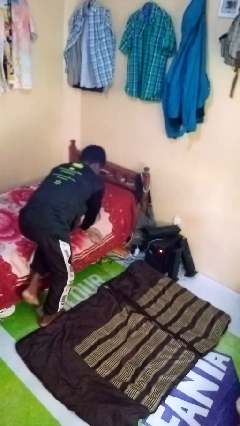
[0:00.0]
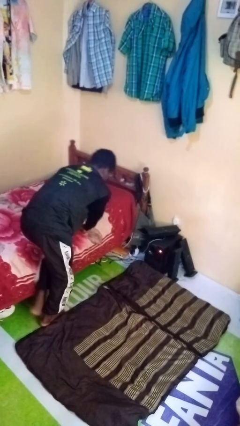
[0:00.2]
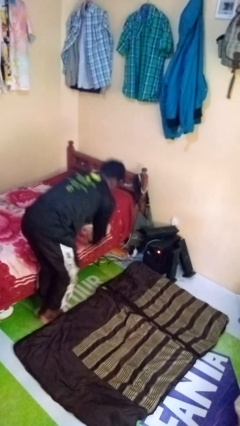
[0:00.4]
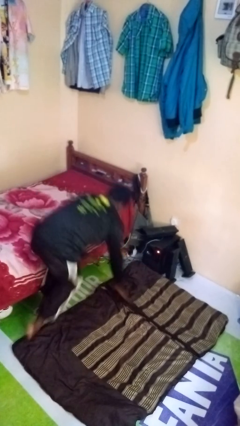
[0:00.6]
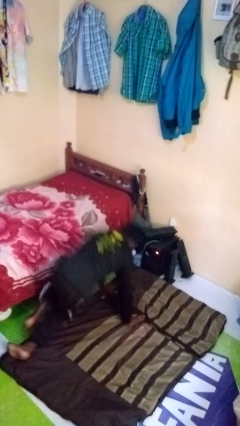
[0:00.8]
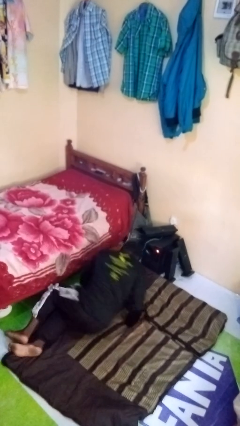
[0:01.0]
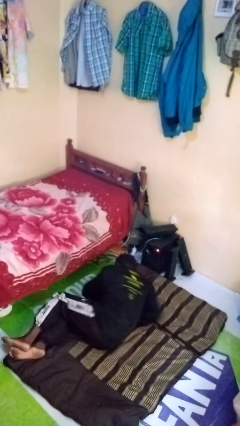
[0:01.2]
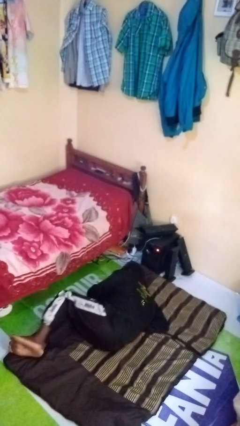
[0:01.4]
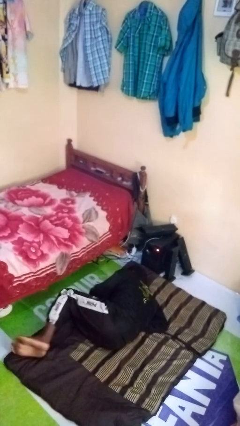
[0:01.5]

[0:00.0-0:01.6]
person falls from bed

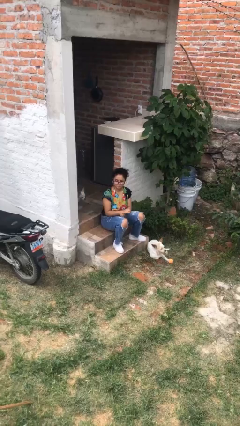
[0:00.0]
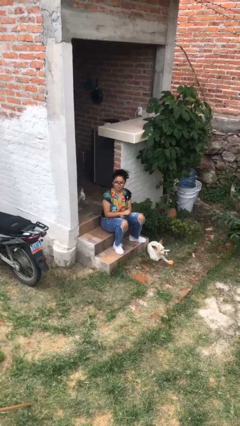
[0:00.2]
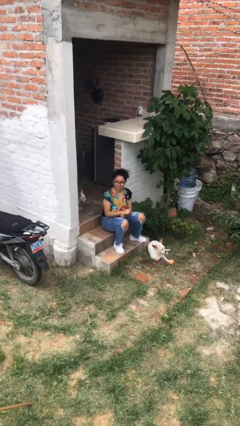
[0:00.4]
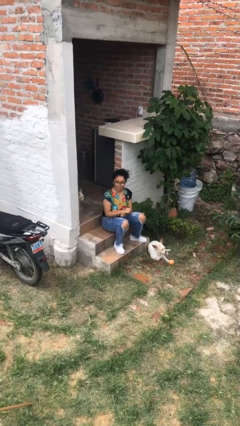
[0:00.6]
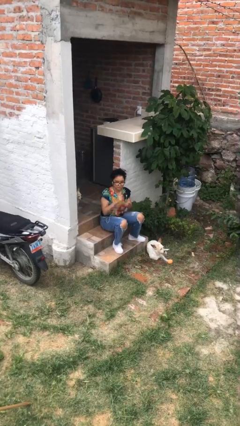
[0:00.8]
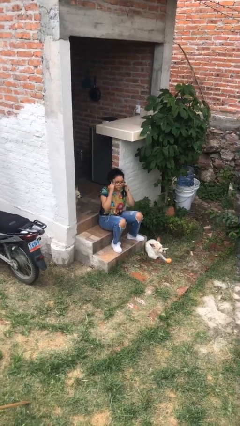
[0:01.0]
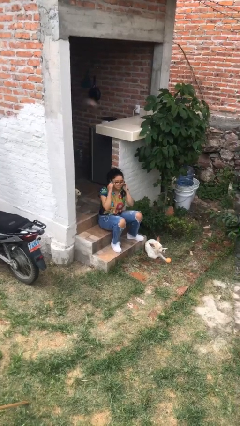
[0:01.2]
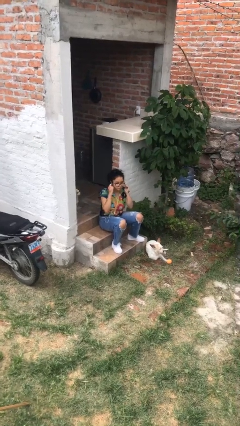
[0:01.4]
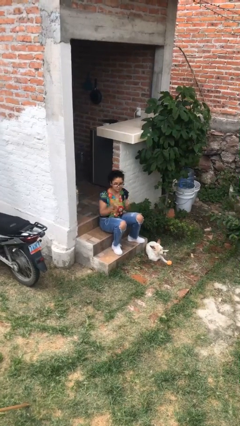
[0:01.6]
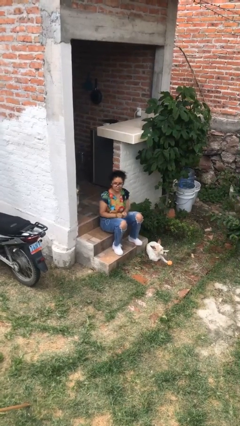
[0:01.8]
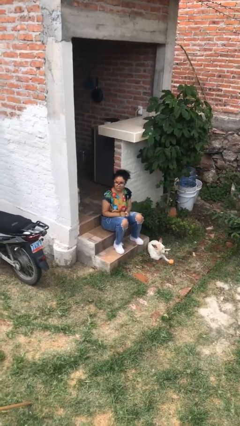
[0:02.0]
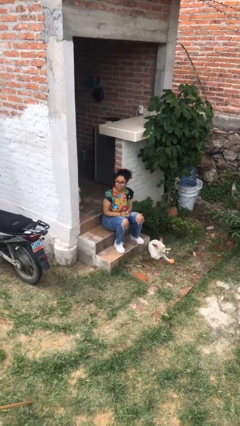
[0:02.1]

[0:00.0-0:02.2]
person takes off headphones

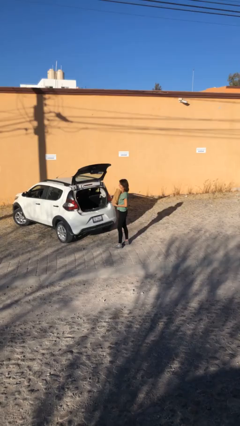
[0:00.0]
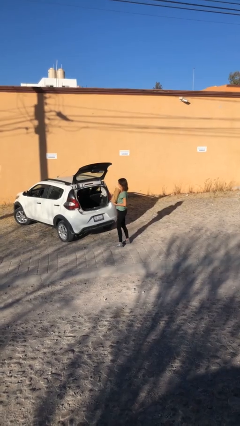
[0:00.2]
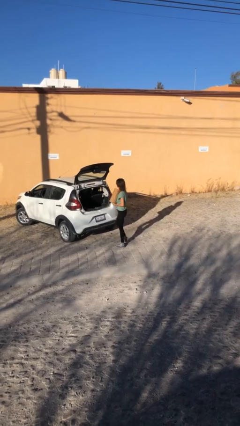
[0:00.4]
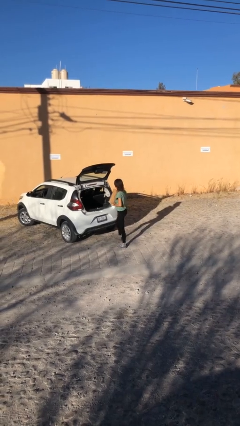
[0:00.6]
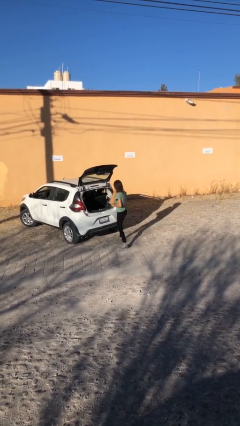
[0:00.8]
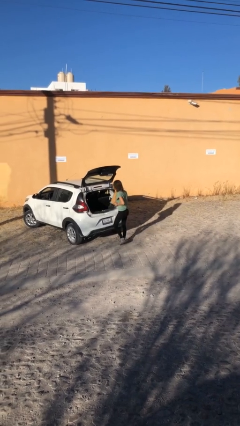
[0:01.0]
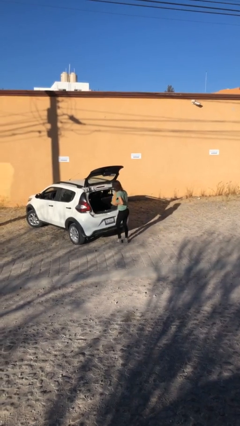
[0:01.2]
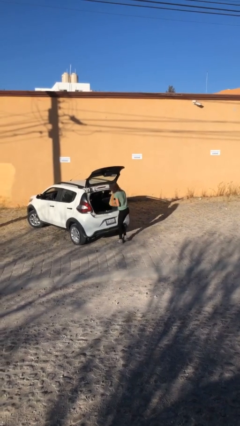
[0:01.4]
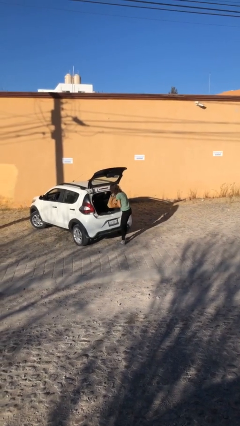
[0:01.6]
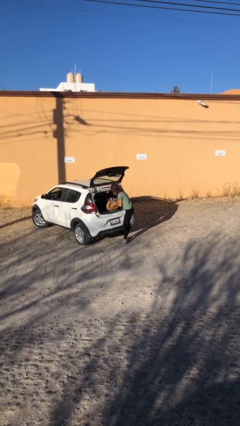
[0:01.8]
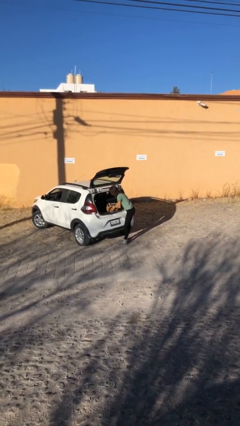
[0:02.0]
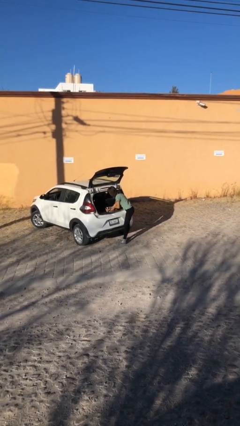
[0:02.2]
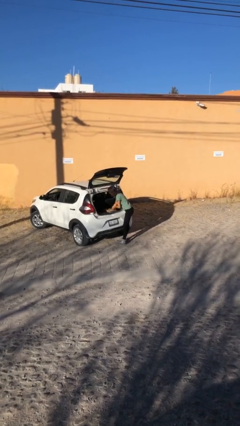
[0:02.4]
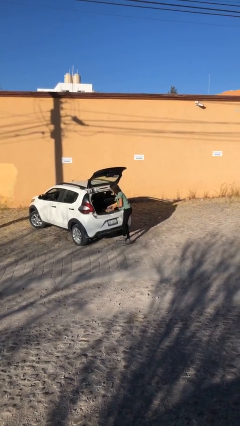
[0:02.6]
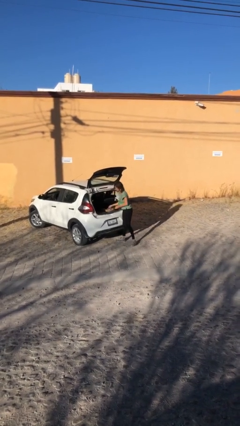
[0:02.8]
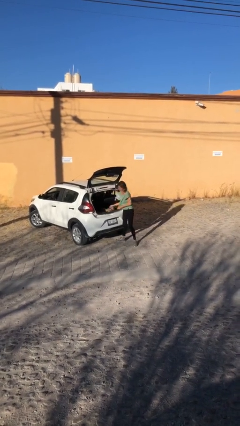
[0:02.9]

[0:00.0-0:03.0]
person loads car

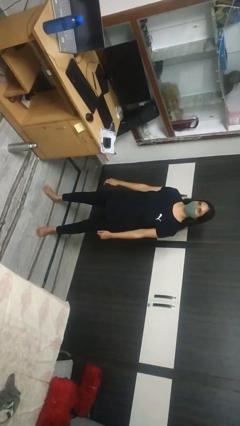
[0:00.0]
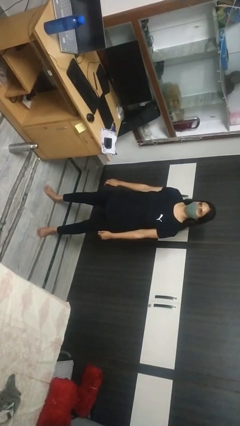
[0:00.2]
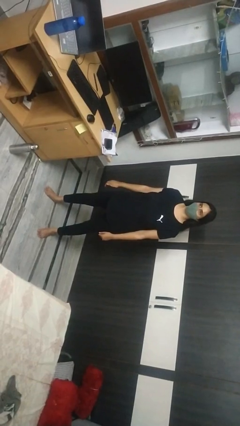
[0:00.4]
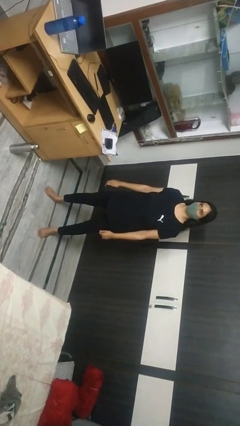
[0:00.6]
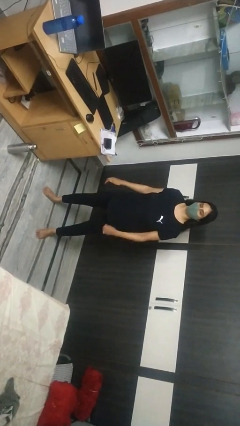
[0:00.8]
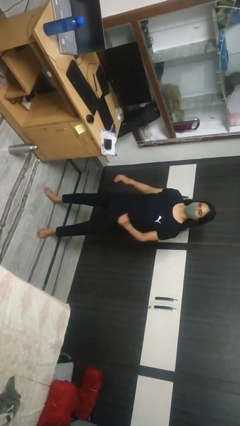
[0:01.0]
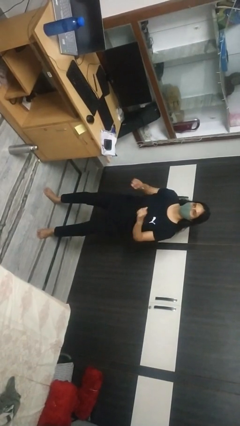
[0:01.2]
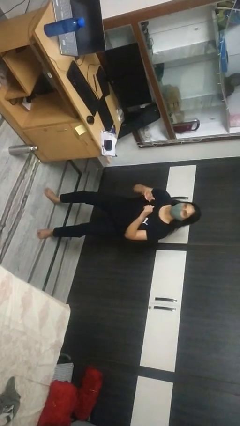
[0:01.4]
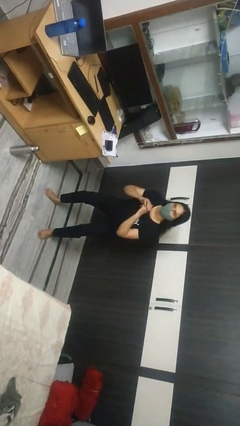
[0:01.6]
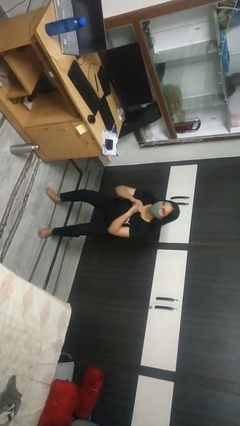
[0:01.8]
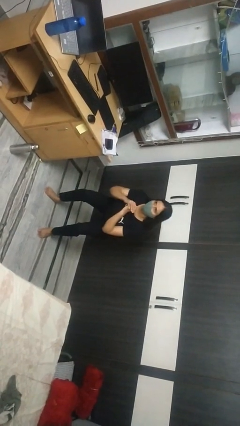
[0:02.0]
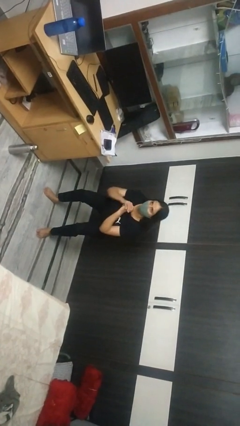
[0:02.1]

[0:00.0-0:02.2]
person squats

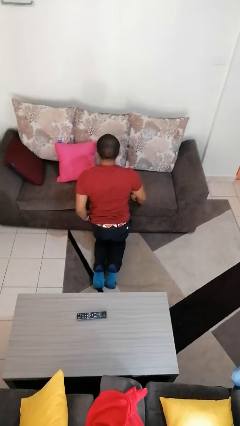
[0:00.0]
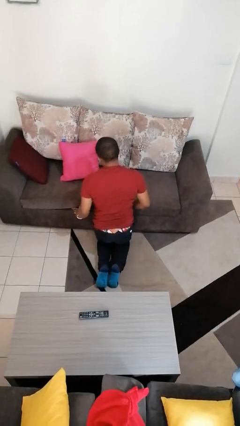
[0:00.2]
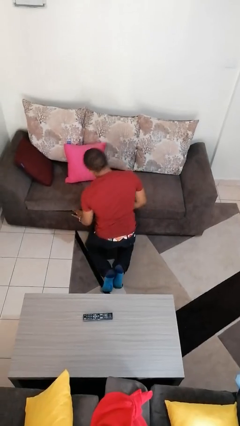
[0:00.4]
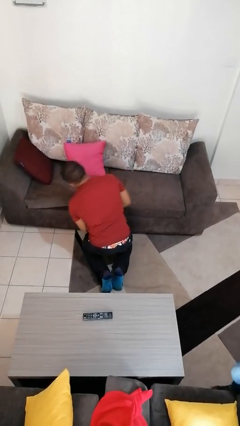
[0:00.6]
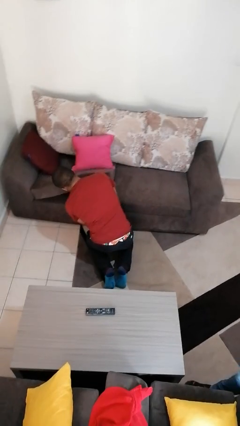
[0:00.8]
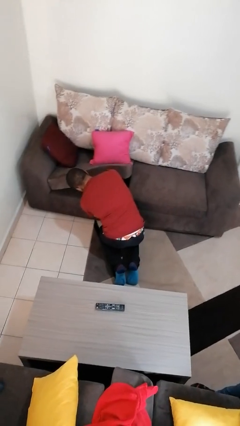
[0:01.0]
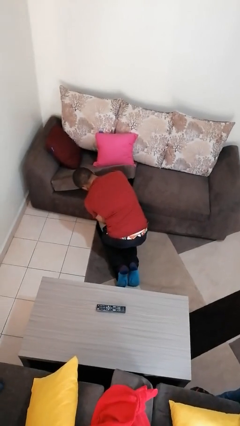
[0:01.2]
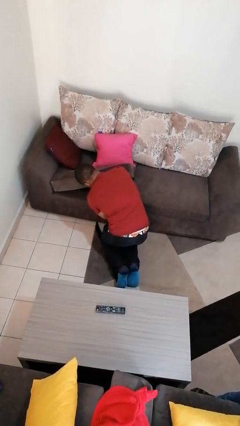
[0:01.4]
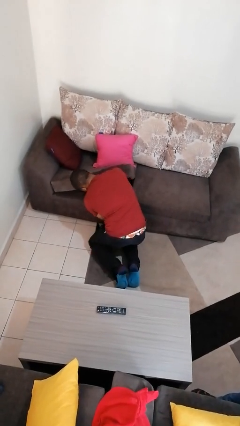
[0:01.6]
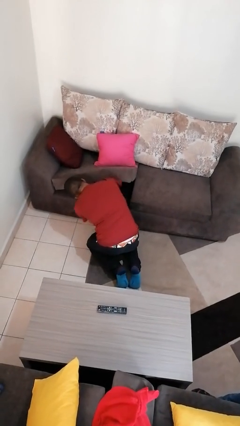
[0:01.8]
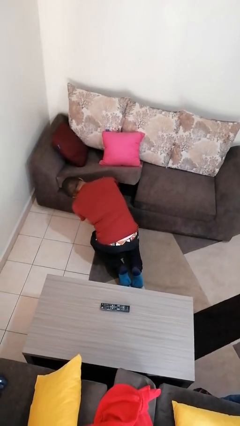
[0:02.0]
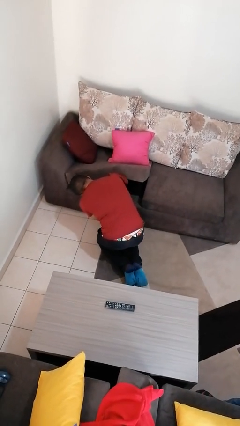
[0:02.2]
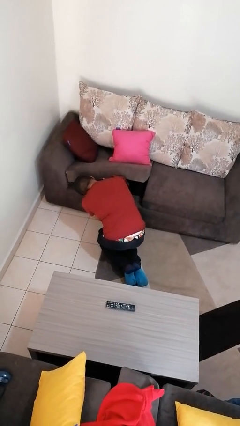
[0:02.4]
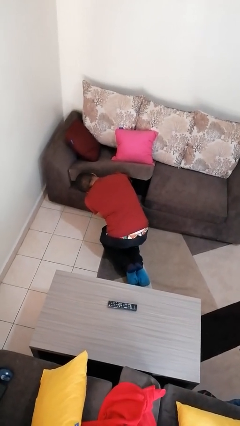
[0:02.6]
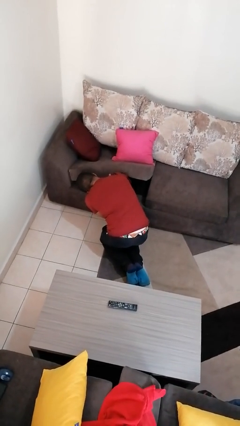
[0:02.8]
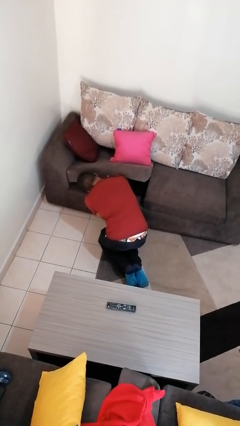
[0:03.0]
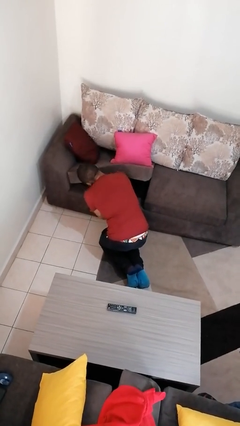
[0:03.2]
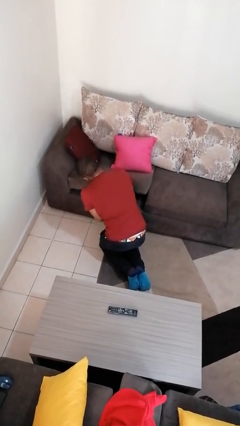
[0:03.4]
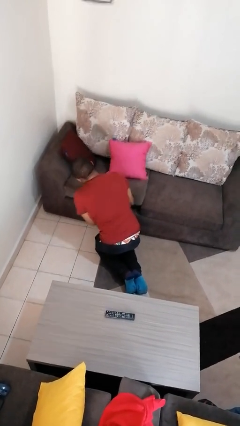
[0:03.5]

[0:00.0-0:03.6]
person searches under couch

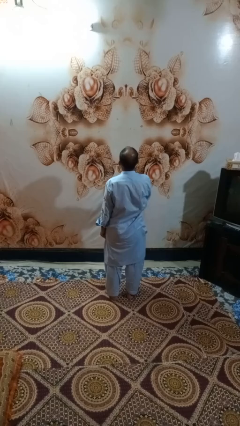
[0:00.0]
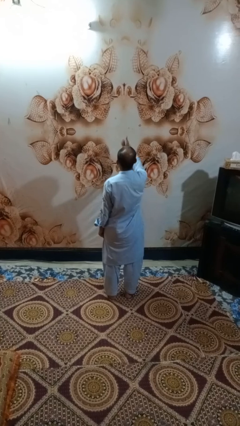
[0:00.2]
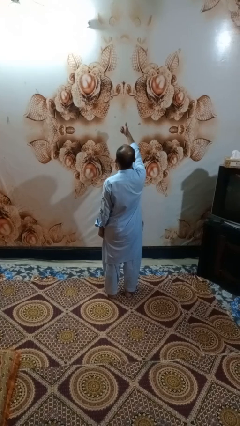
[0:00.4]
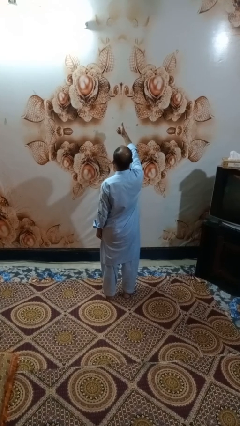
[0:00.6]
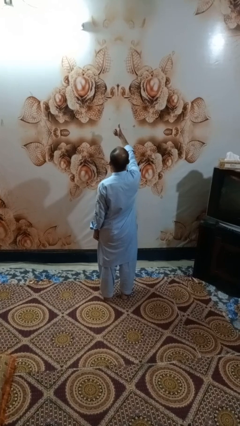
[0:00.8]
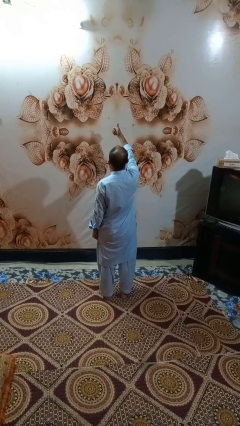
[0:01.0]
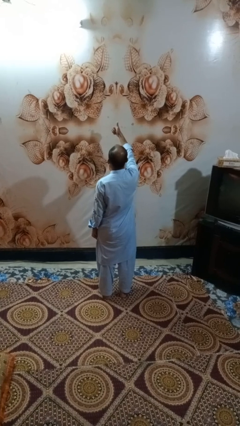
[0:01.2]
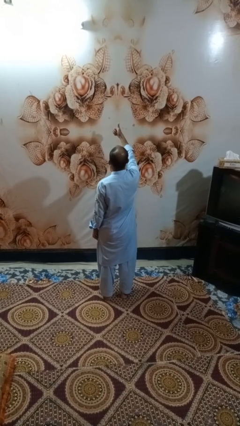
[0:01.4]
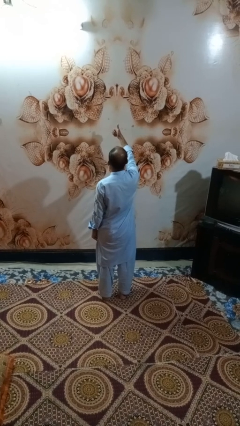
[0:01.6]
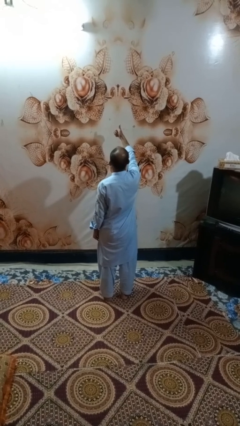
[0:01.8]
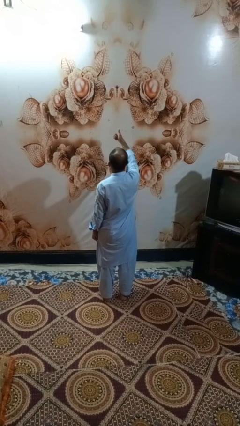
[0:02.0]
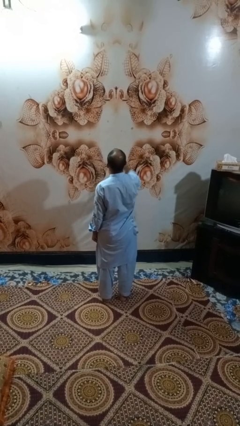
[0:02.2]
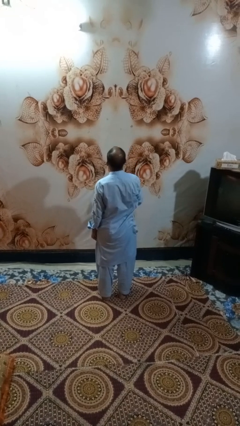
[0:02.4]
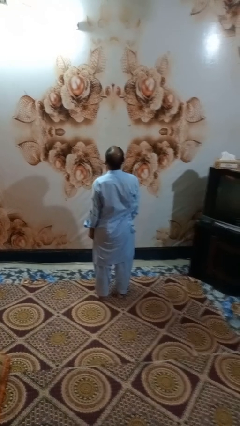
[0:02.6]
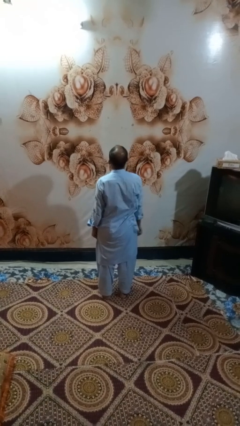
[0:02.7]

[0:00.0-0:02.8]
person gestures thumbs up

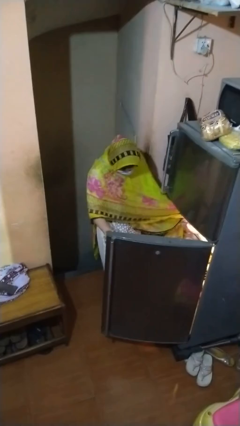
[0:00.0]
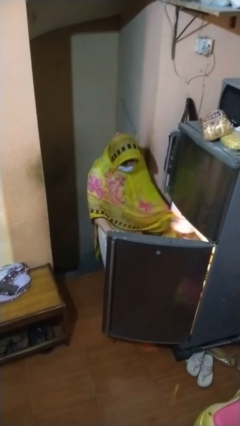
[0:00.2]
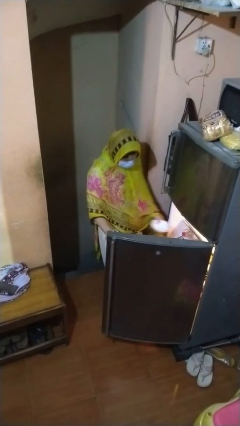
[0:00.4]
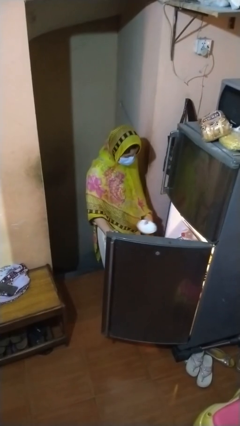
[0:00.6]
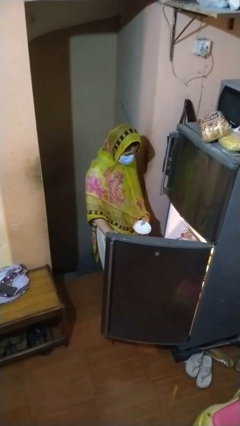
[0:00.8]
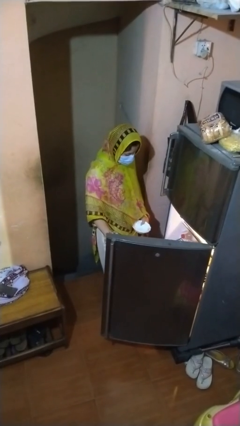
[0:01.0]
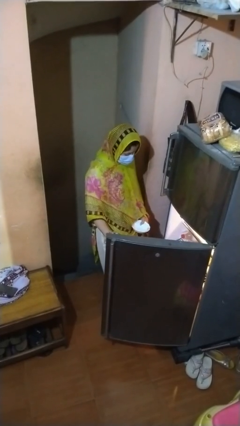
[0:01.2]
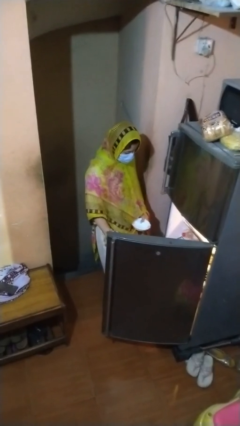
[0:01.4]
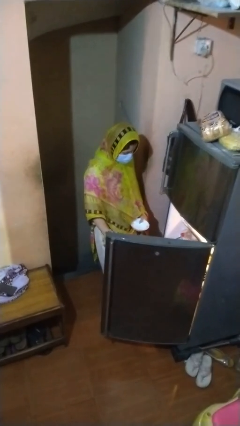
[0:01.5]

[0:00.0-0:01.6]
person takes object from refrigerator
